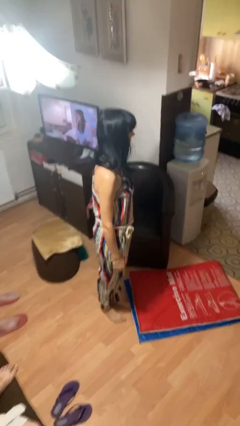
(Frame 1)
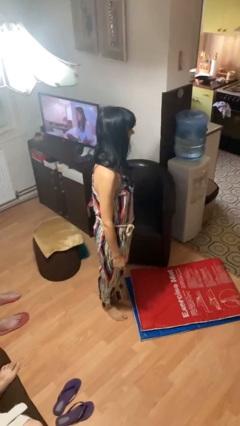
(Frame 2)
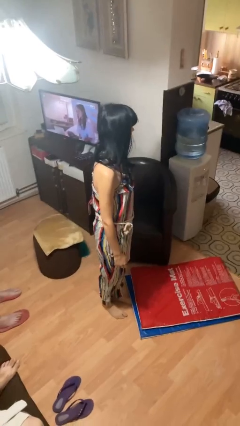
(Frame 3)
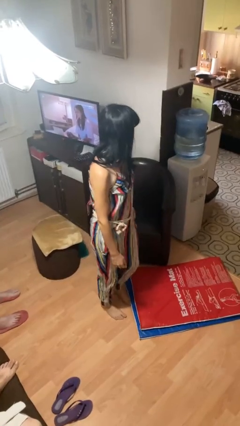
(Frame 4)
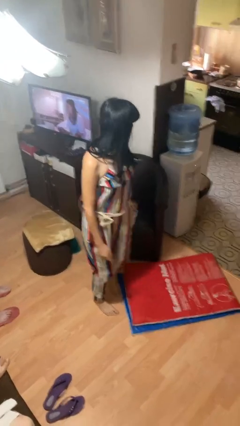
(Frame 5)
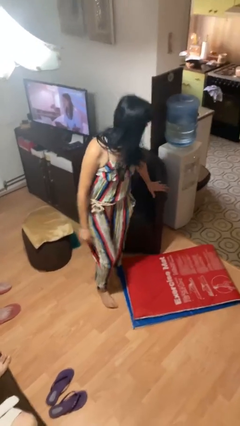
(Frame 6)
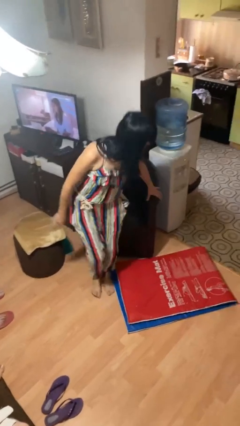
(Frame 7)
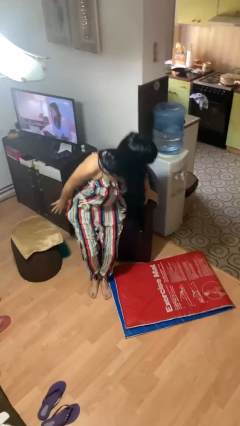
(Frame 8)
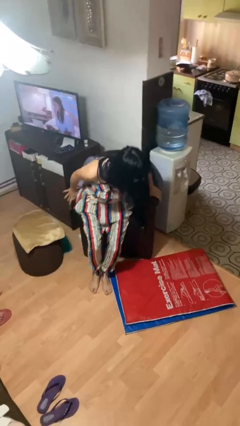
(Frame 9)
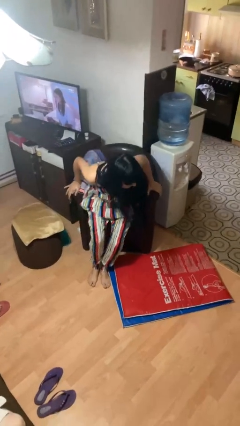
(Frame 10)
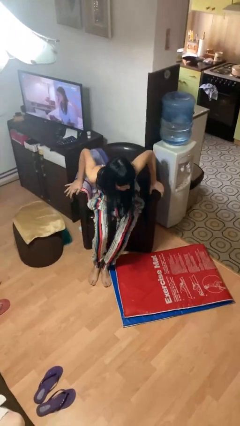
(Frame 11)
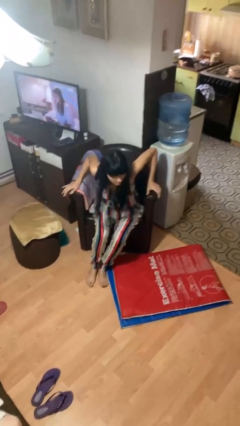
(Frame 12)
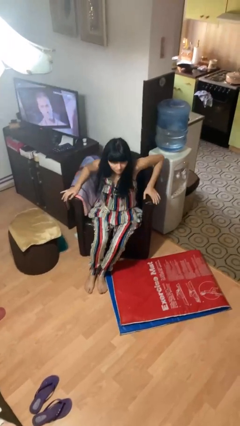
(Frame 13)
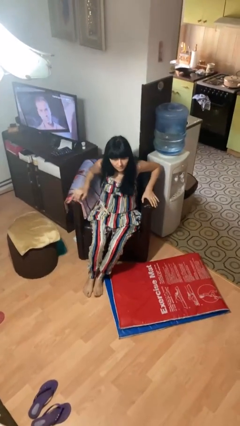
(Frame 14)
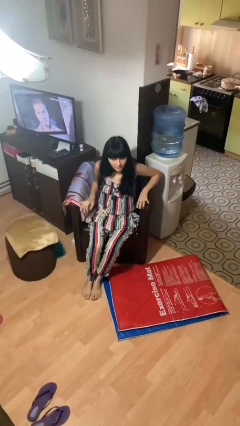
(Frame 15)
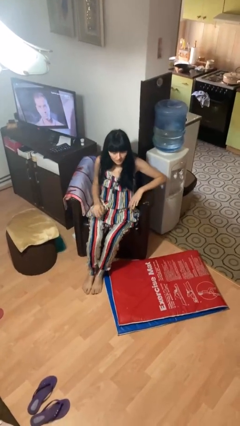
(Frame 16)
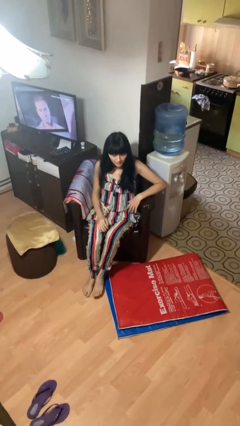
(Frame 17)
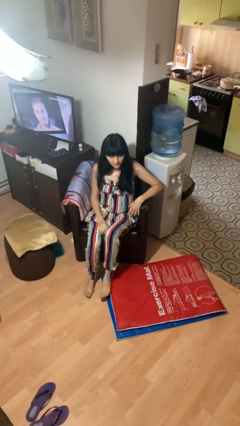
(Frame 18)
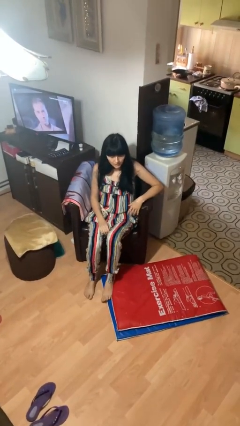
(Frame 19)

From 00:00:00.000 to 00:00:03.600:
person sits down

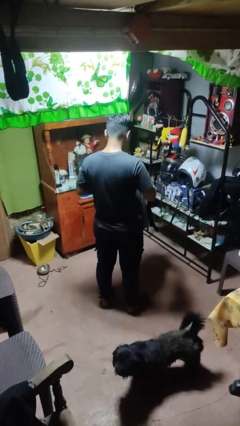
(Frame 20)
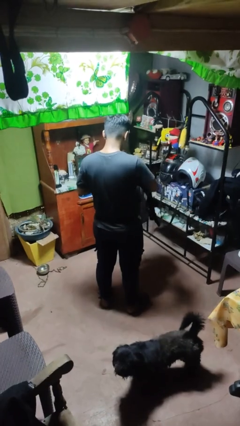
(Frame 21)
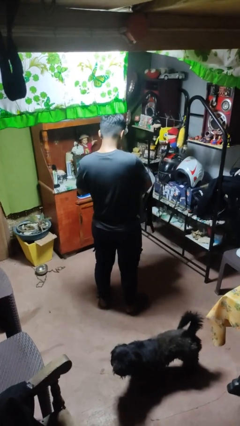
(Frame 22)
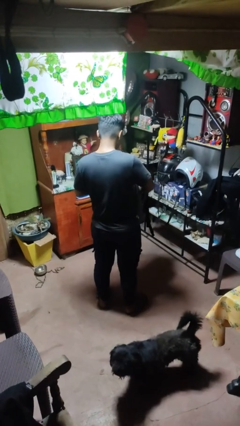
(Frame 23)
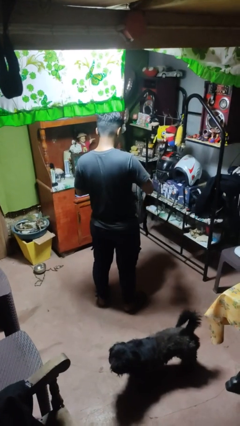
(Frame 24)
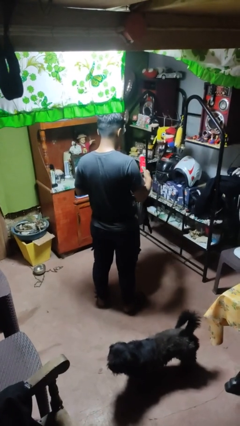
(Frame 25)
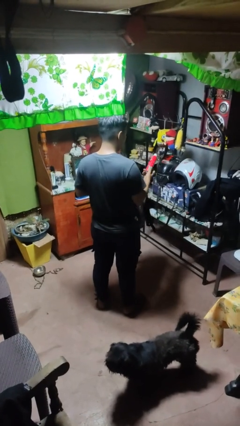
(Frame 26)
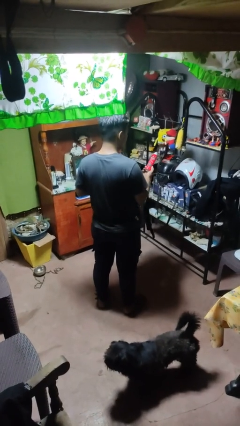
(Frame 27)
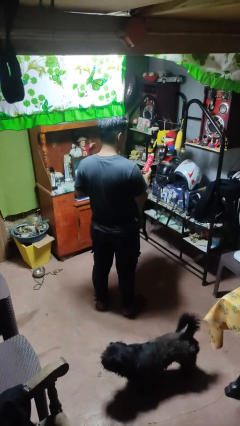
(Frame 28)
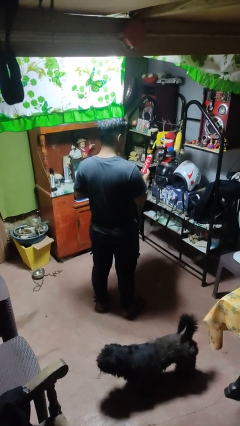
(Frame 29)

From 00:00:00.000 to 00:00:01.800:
person takes object from bag

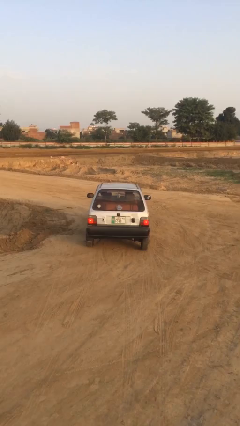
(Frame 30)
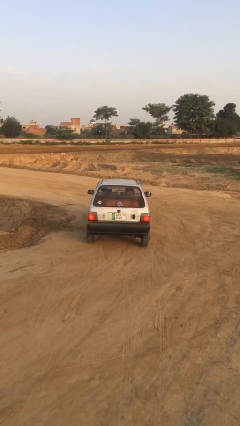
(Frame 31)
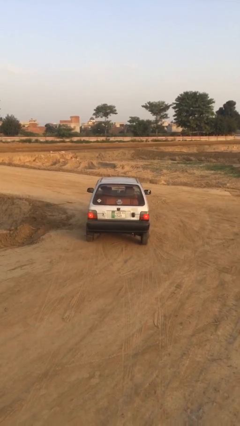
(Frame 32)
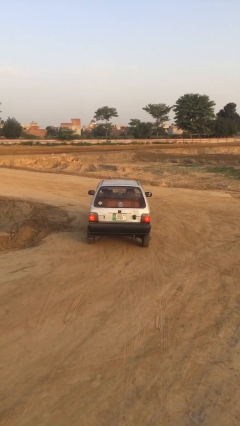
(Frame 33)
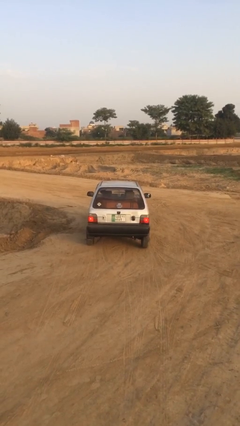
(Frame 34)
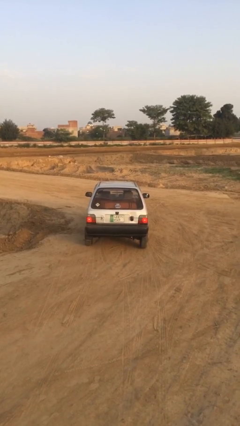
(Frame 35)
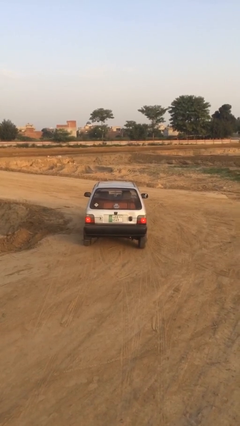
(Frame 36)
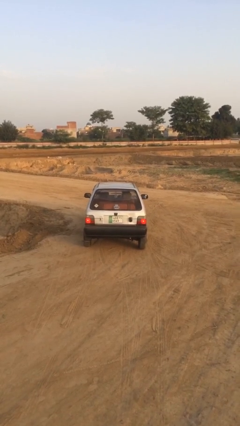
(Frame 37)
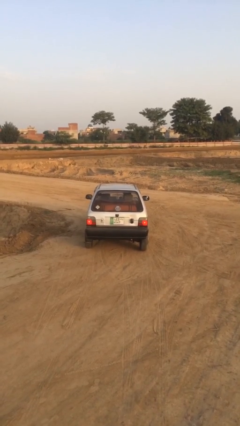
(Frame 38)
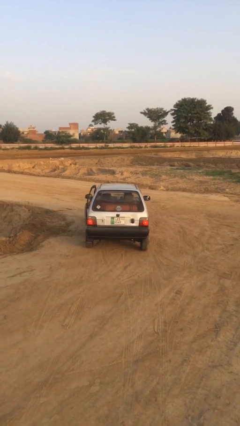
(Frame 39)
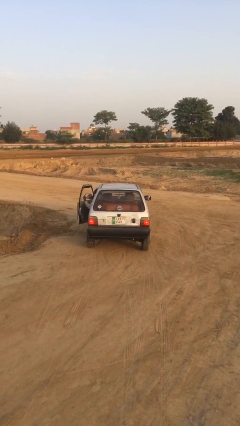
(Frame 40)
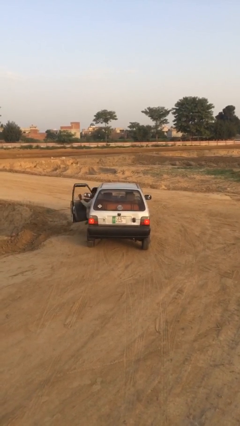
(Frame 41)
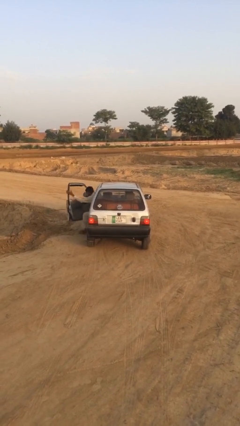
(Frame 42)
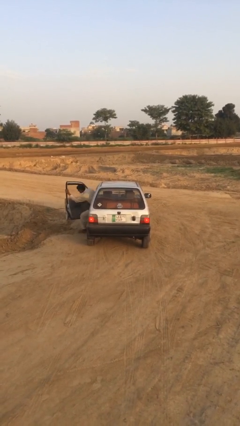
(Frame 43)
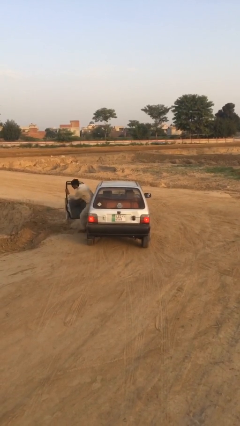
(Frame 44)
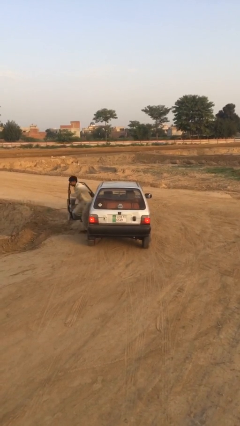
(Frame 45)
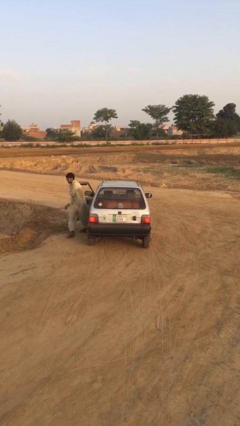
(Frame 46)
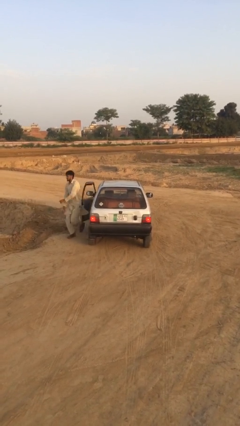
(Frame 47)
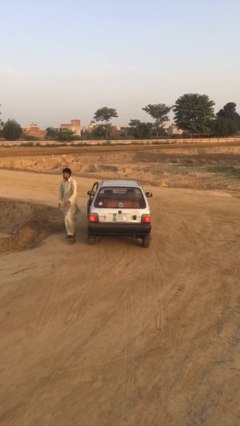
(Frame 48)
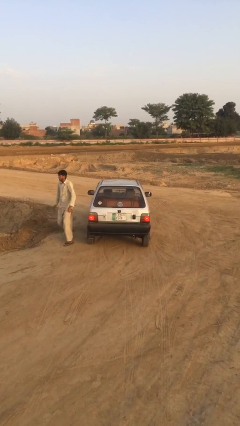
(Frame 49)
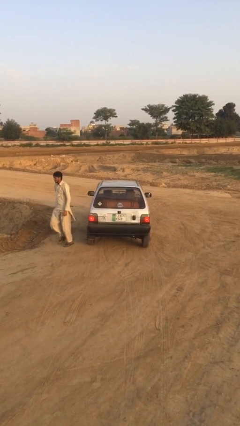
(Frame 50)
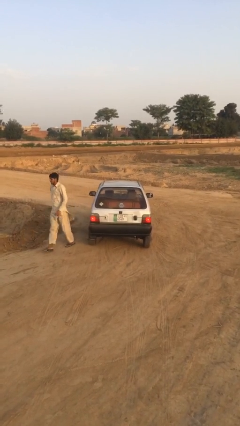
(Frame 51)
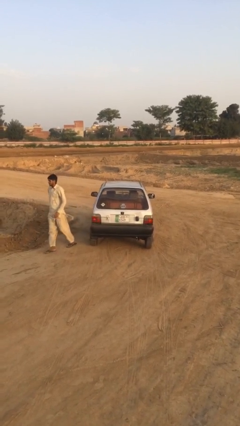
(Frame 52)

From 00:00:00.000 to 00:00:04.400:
car drops off person

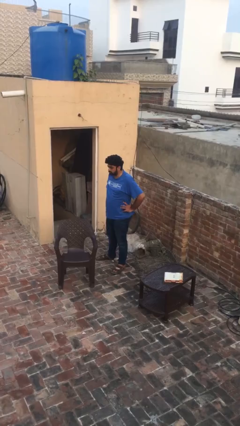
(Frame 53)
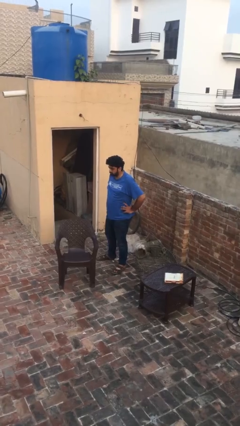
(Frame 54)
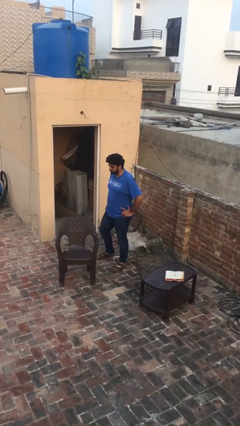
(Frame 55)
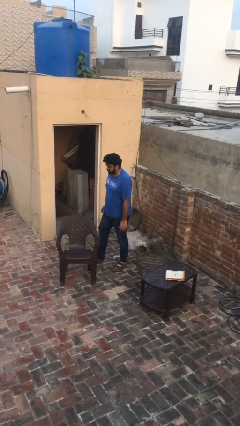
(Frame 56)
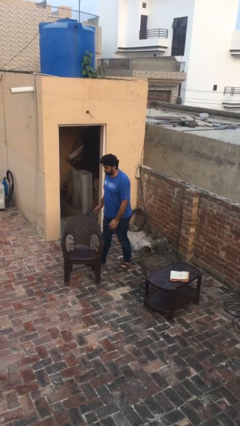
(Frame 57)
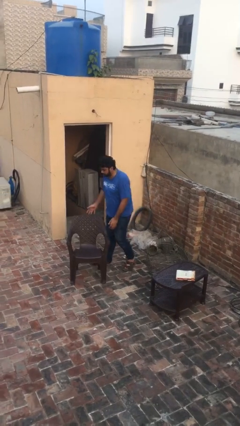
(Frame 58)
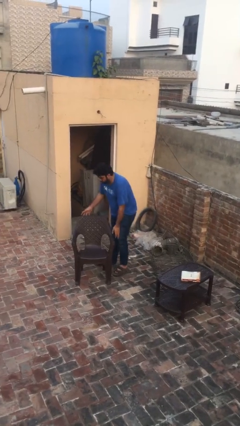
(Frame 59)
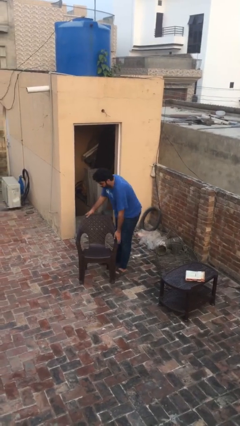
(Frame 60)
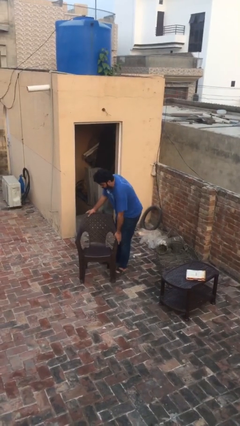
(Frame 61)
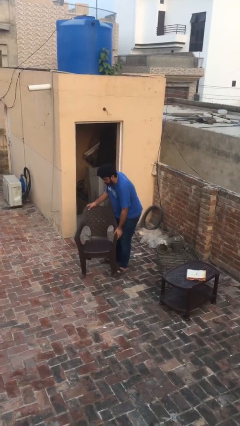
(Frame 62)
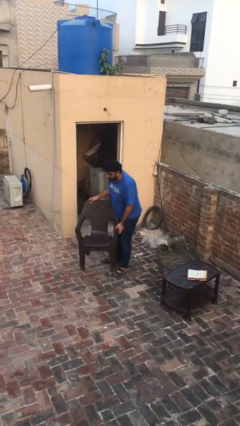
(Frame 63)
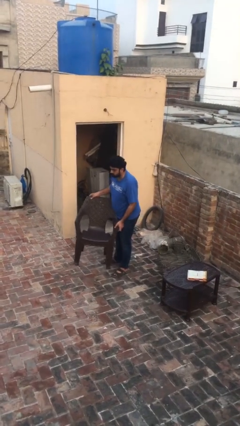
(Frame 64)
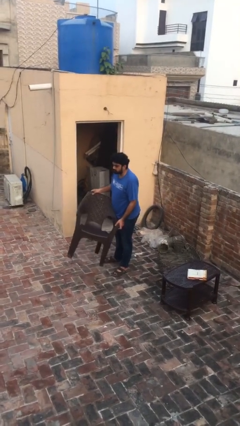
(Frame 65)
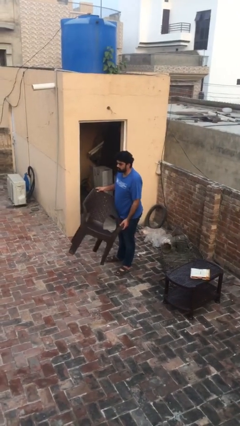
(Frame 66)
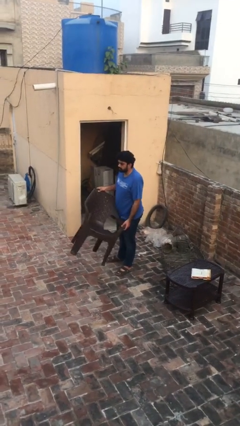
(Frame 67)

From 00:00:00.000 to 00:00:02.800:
person picks up object from floor

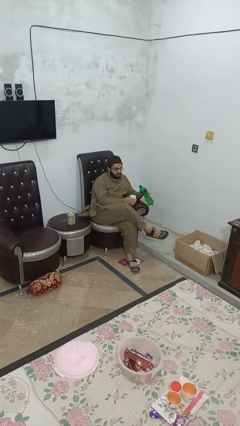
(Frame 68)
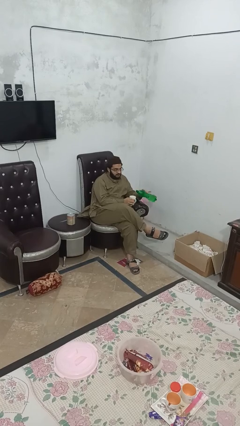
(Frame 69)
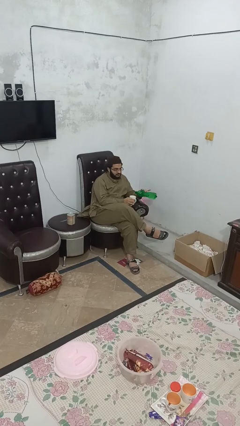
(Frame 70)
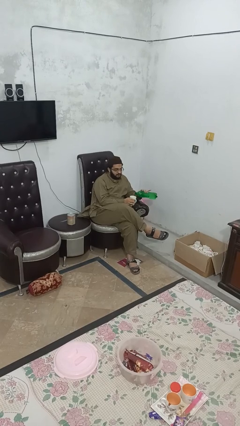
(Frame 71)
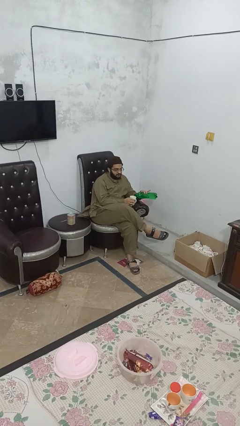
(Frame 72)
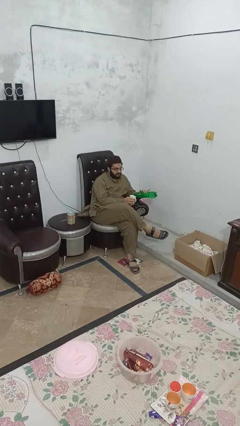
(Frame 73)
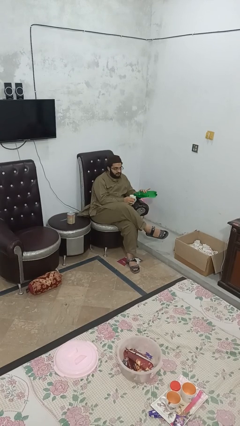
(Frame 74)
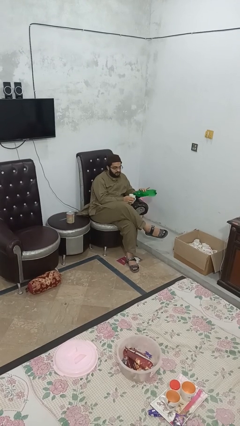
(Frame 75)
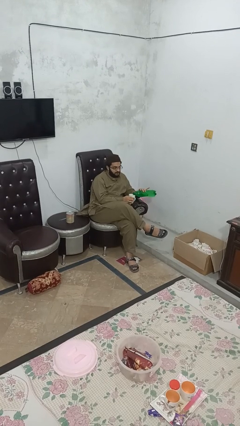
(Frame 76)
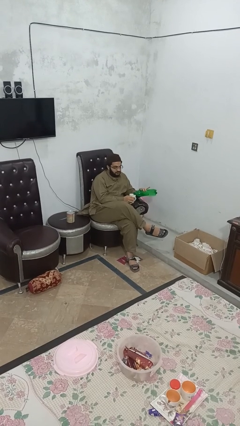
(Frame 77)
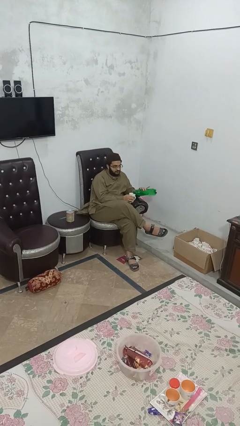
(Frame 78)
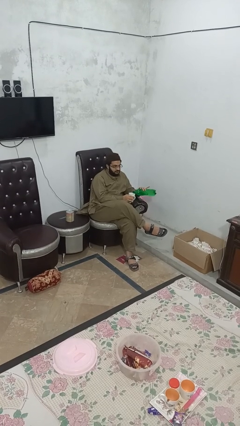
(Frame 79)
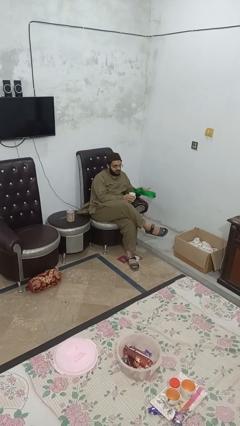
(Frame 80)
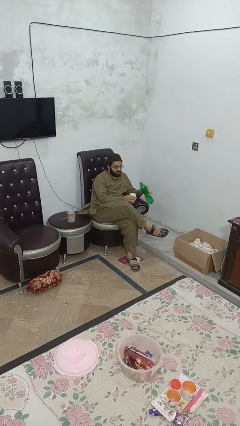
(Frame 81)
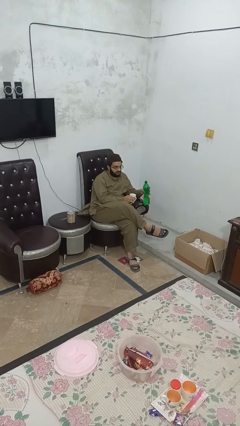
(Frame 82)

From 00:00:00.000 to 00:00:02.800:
person pours liquid into cup

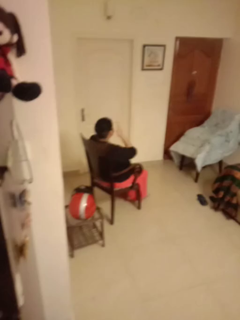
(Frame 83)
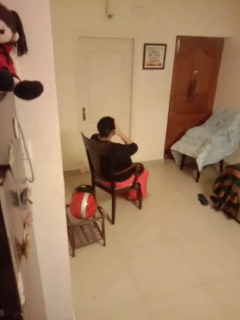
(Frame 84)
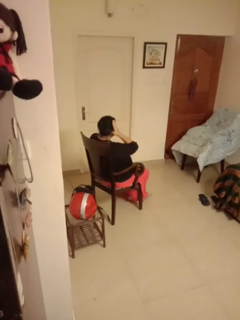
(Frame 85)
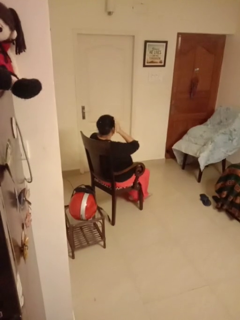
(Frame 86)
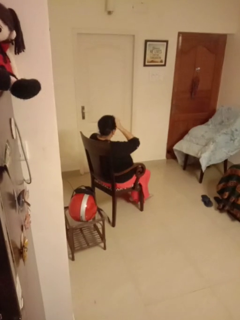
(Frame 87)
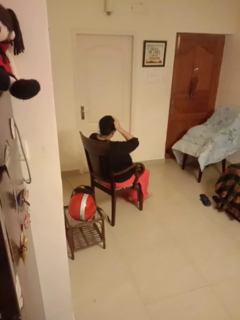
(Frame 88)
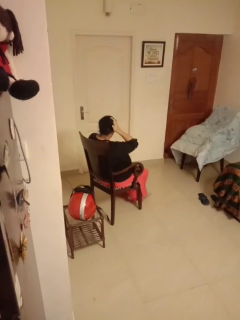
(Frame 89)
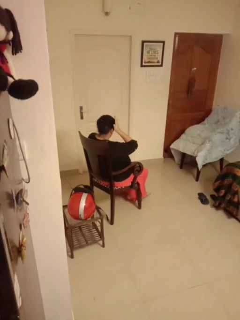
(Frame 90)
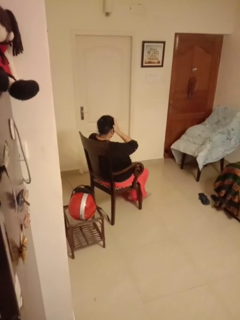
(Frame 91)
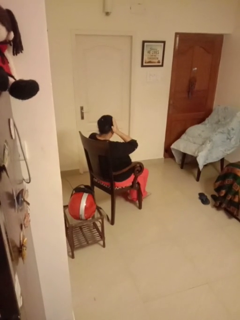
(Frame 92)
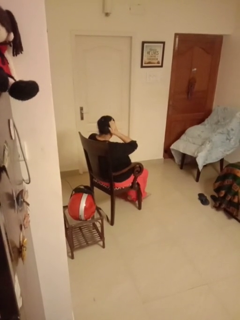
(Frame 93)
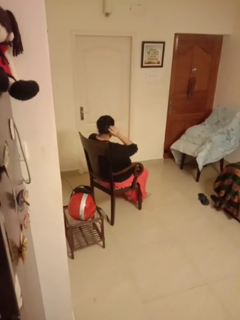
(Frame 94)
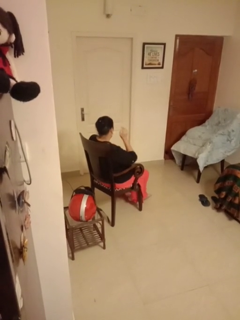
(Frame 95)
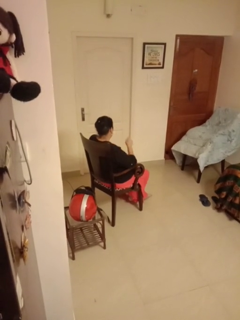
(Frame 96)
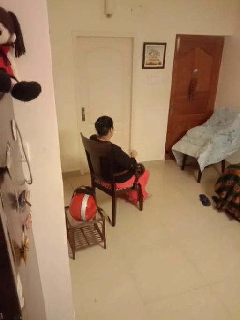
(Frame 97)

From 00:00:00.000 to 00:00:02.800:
person strokes hair
